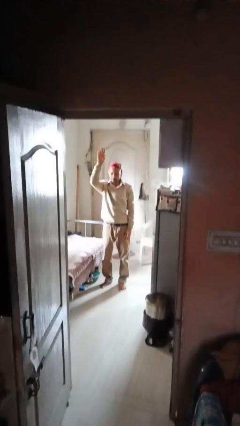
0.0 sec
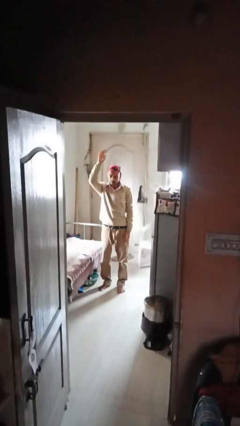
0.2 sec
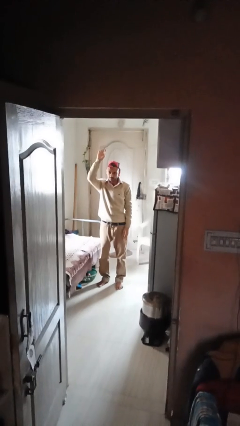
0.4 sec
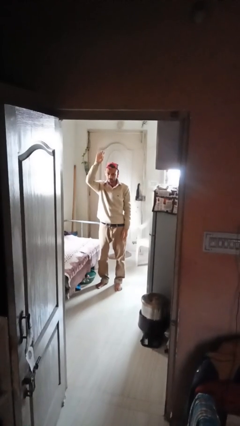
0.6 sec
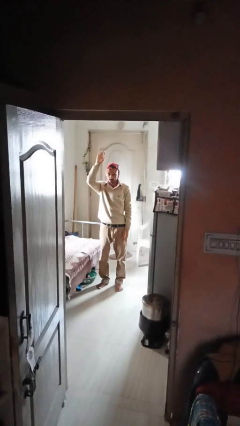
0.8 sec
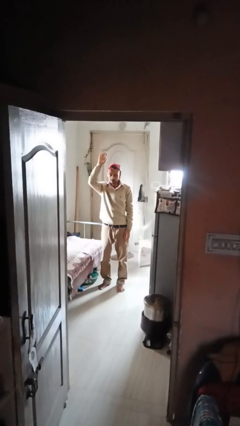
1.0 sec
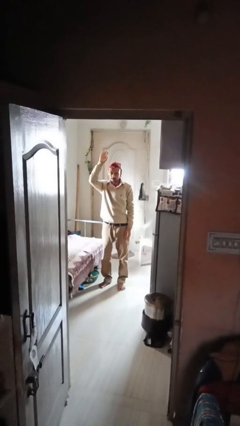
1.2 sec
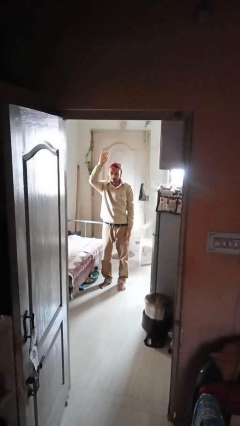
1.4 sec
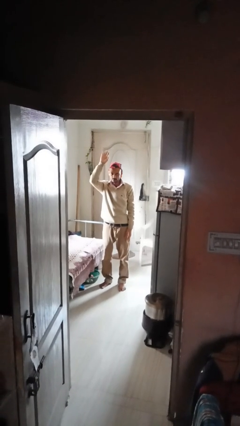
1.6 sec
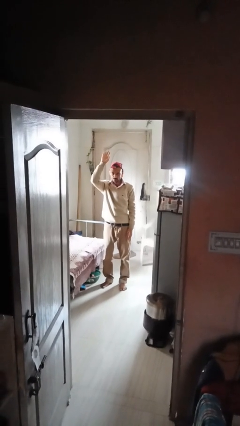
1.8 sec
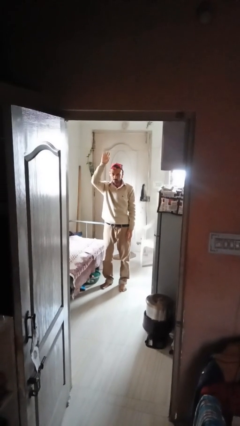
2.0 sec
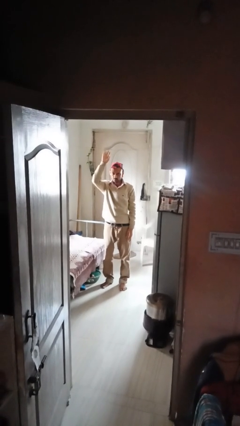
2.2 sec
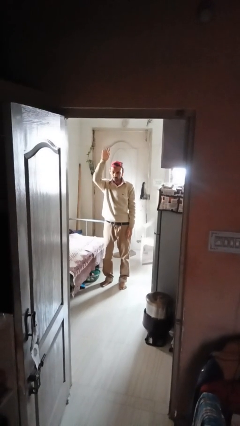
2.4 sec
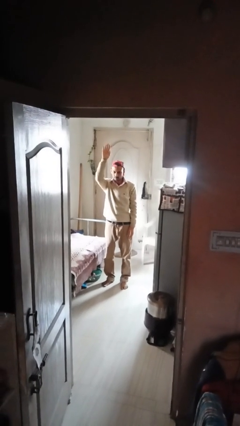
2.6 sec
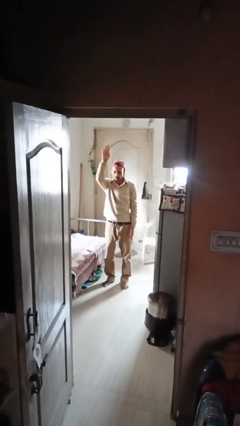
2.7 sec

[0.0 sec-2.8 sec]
person gestures raise hand

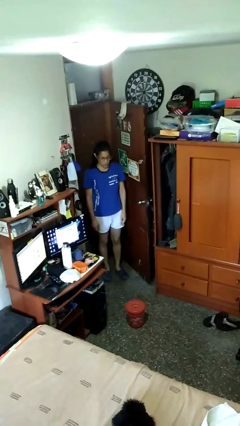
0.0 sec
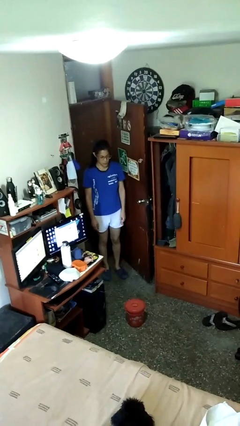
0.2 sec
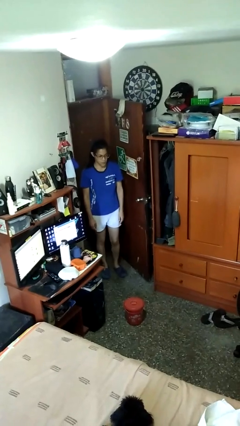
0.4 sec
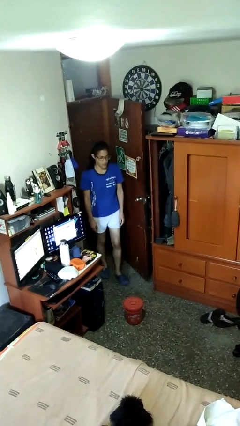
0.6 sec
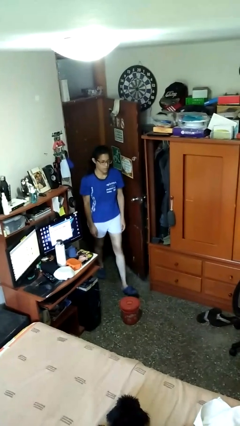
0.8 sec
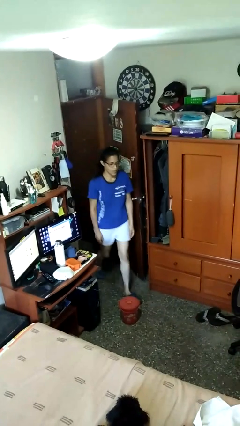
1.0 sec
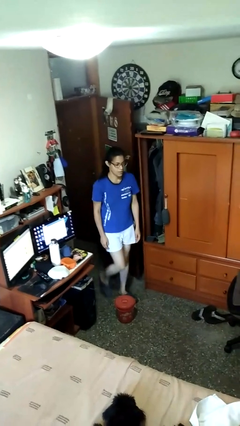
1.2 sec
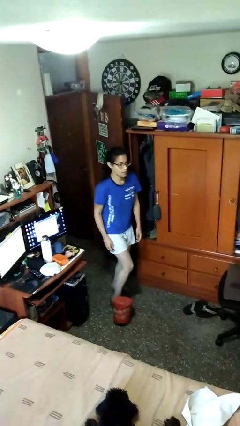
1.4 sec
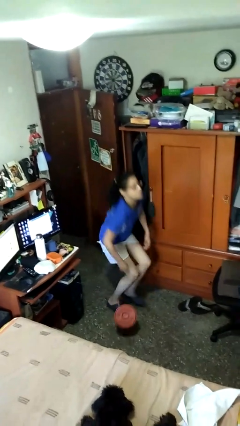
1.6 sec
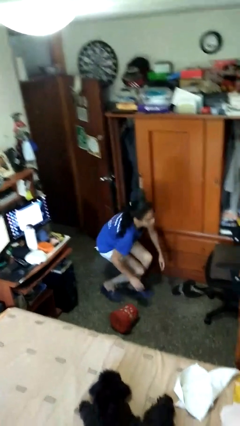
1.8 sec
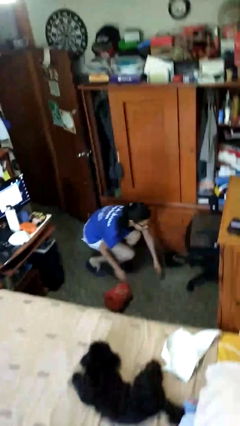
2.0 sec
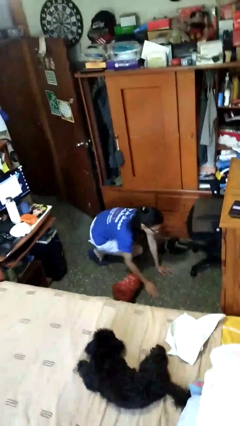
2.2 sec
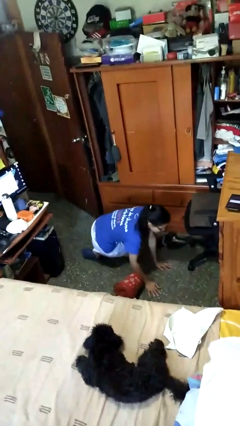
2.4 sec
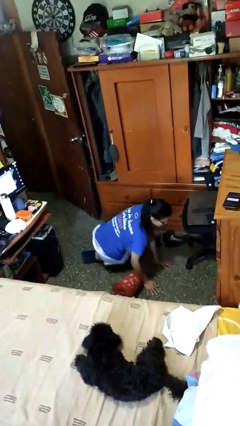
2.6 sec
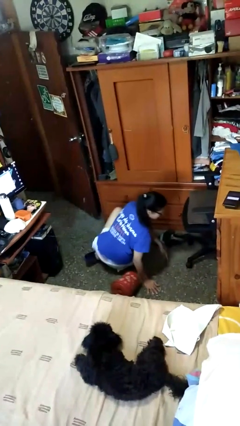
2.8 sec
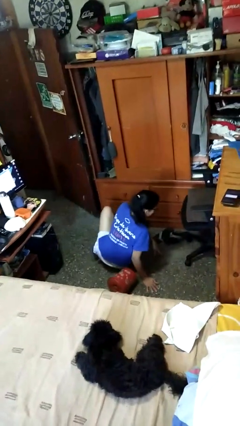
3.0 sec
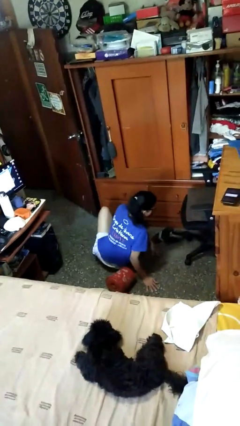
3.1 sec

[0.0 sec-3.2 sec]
person trips on object on floor

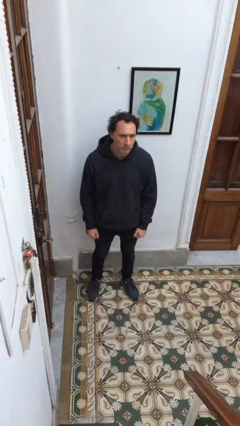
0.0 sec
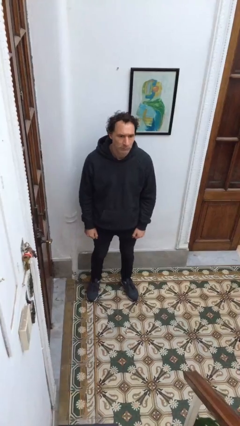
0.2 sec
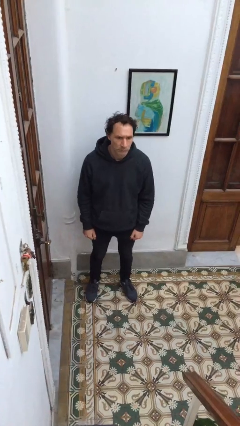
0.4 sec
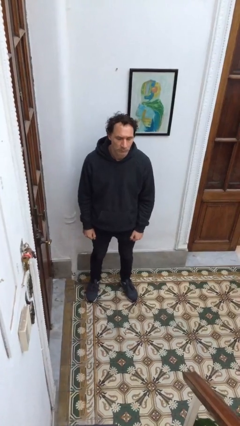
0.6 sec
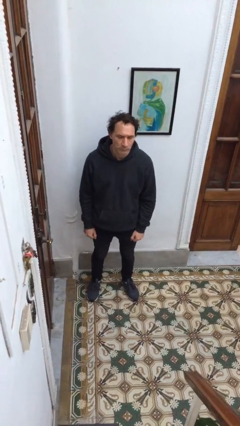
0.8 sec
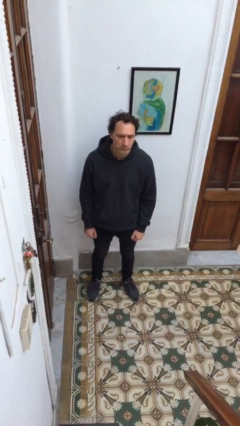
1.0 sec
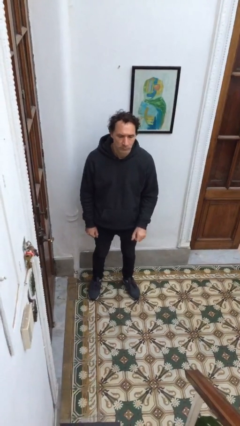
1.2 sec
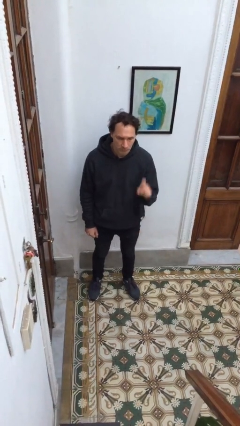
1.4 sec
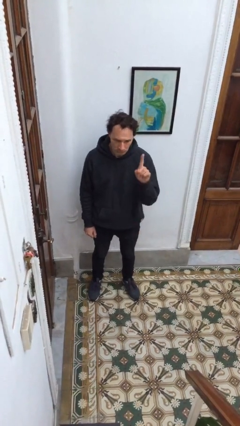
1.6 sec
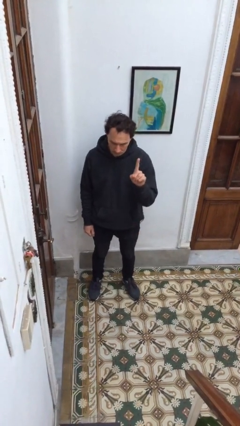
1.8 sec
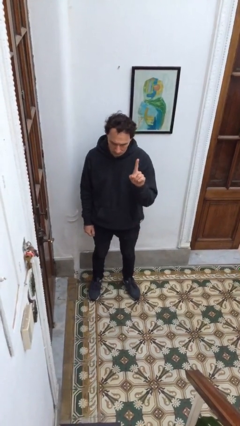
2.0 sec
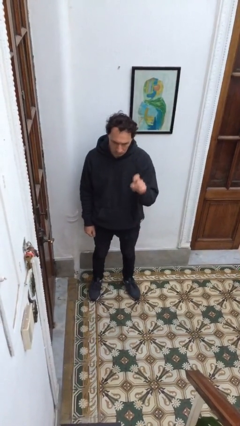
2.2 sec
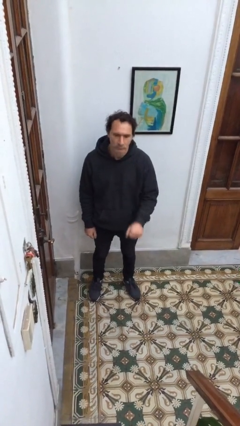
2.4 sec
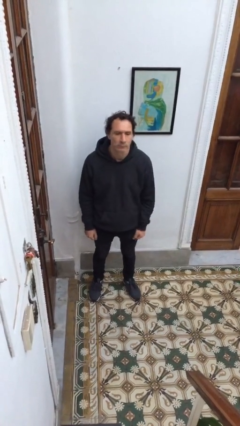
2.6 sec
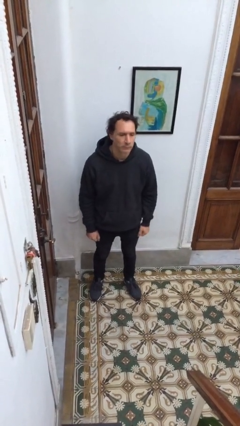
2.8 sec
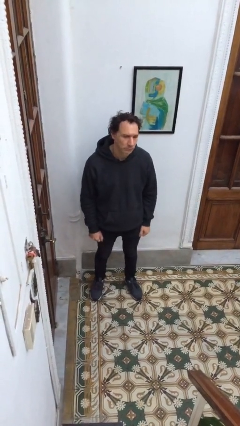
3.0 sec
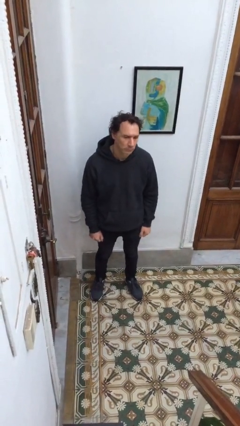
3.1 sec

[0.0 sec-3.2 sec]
person gestures number one

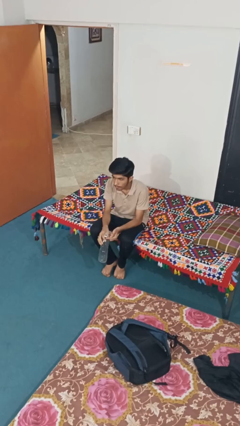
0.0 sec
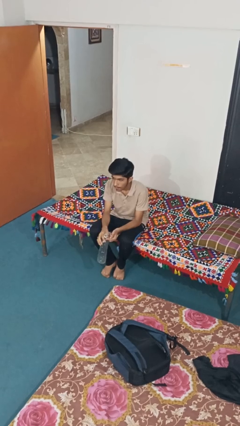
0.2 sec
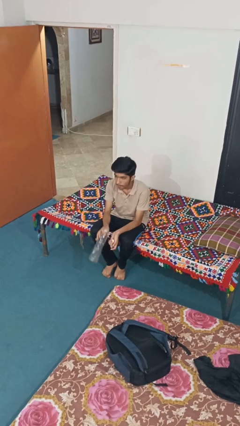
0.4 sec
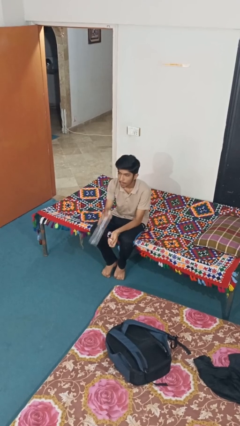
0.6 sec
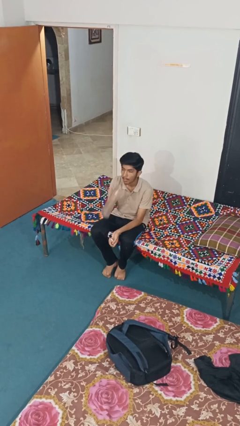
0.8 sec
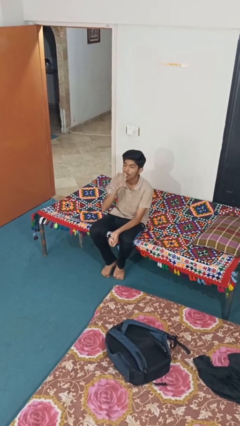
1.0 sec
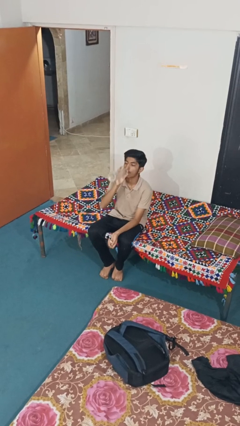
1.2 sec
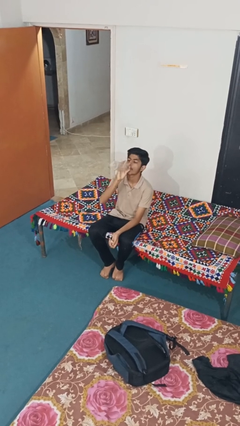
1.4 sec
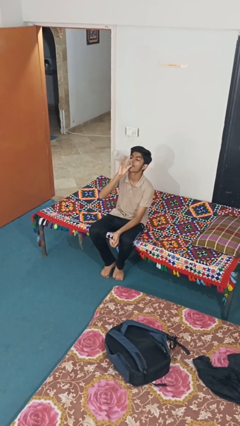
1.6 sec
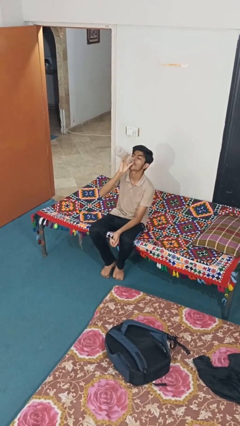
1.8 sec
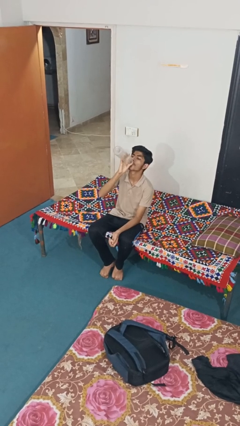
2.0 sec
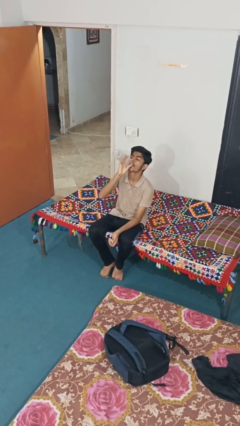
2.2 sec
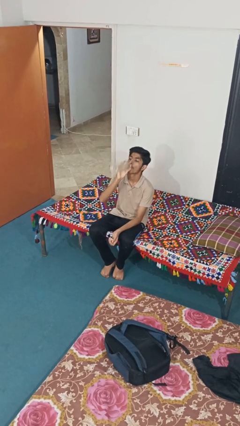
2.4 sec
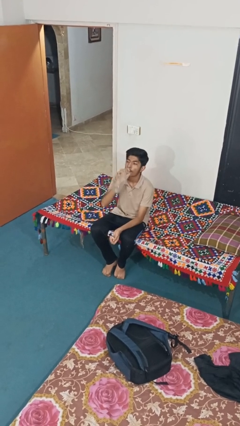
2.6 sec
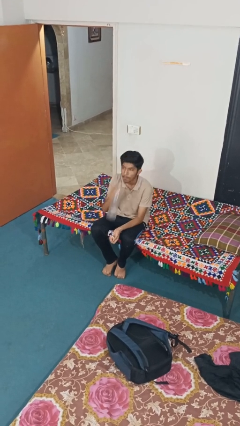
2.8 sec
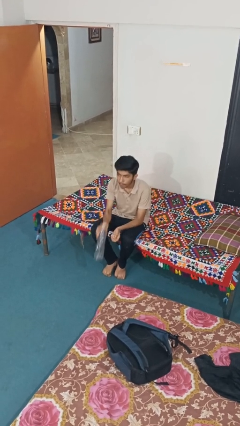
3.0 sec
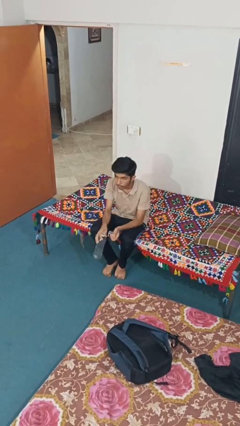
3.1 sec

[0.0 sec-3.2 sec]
person drinks from bottle

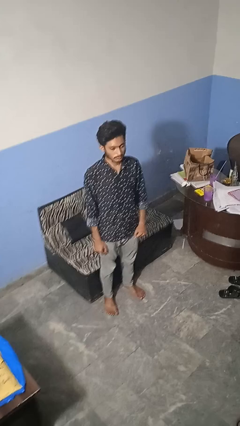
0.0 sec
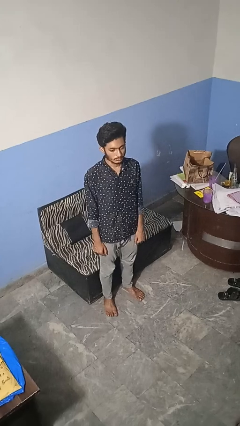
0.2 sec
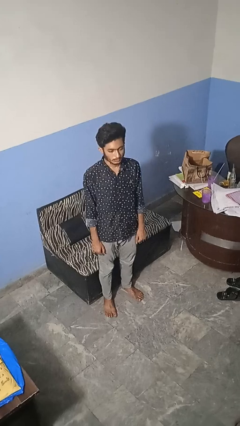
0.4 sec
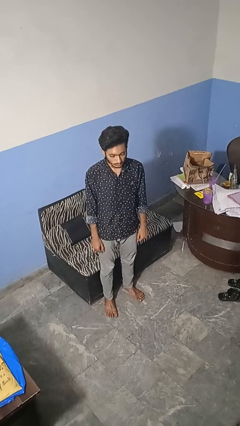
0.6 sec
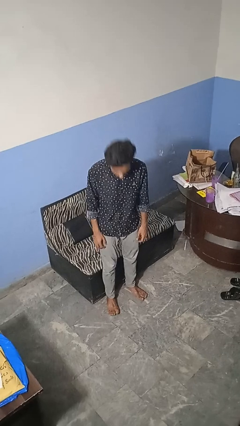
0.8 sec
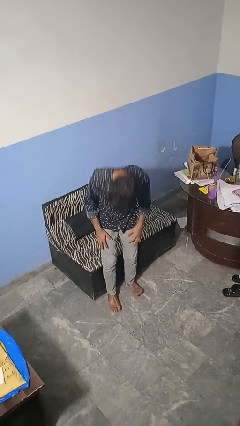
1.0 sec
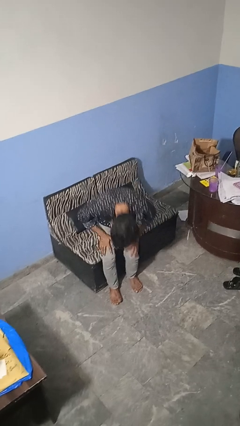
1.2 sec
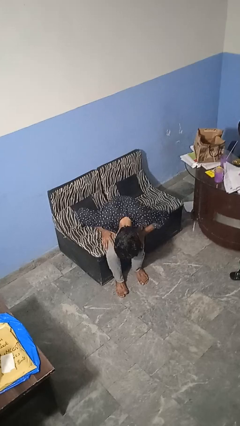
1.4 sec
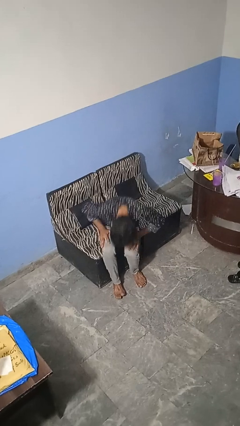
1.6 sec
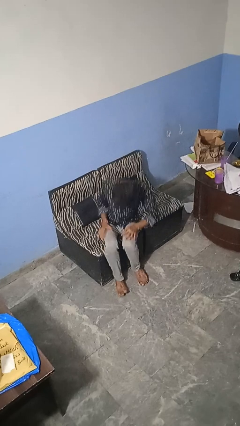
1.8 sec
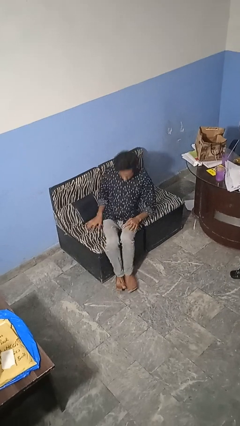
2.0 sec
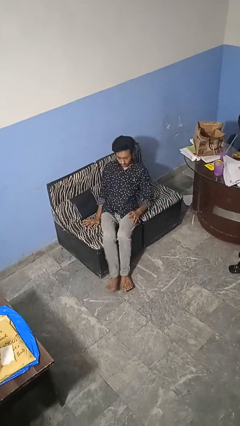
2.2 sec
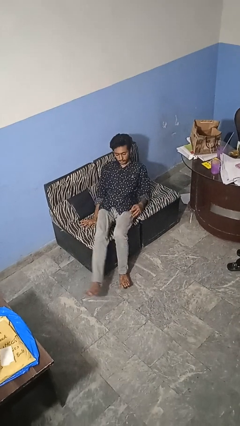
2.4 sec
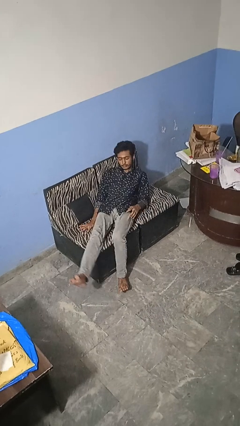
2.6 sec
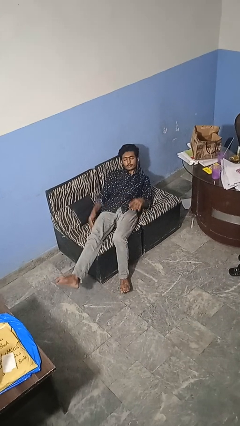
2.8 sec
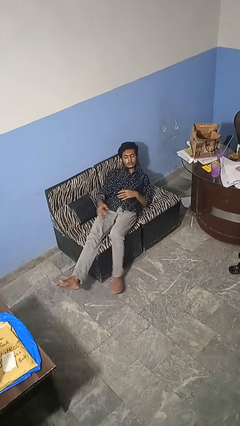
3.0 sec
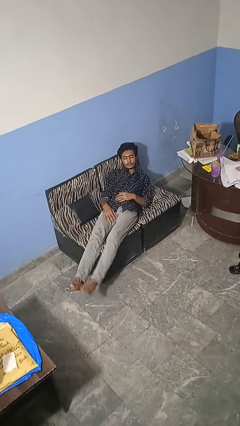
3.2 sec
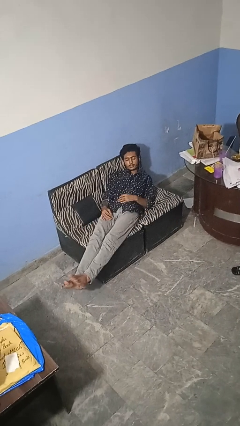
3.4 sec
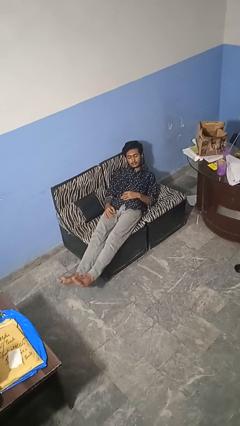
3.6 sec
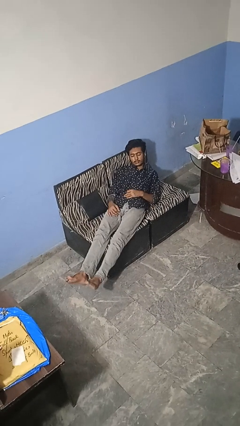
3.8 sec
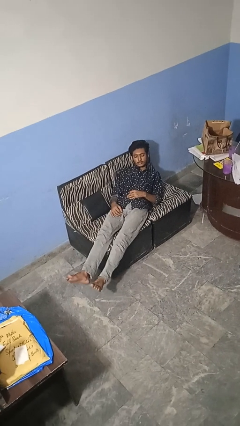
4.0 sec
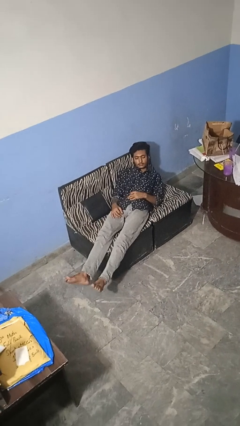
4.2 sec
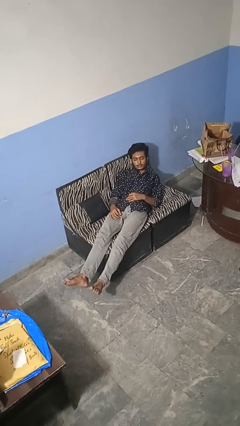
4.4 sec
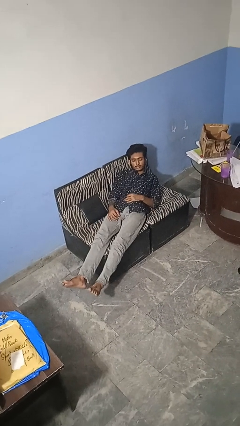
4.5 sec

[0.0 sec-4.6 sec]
person lies down on couch

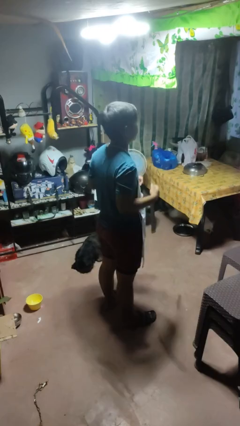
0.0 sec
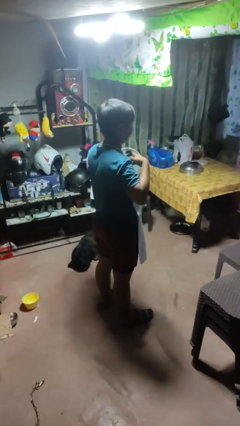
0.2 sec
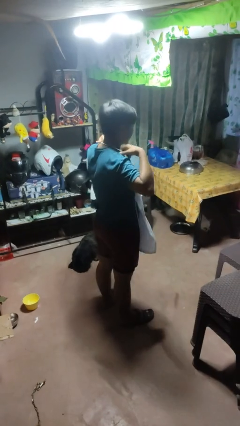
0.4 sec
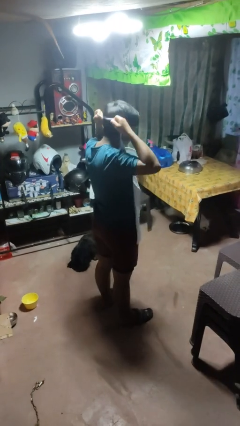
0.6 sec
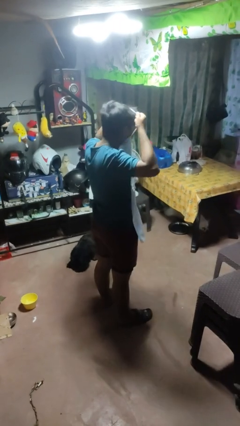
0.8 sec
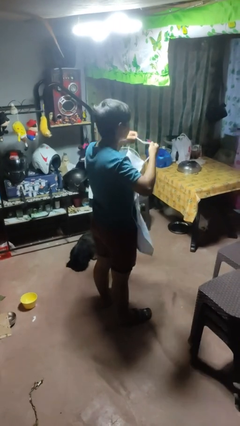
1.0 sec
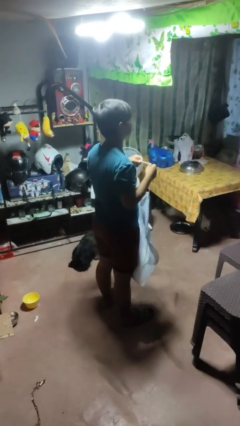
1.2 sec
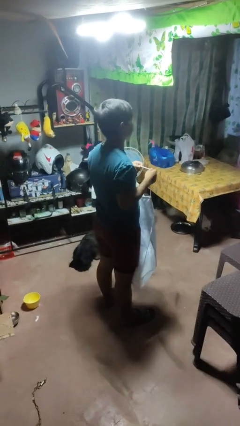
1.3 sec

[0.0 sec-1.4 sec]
person takes off apron
